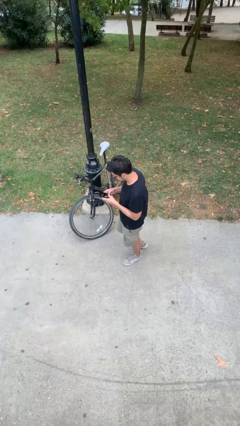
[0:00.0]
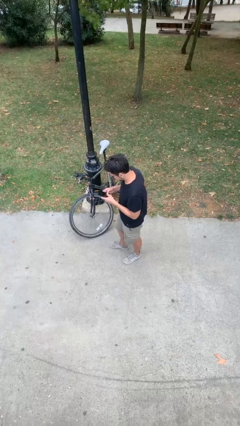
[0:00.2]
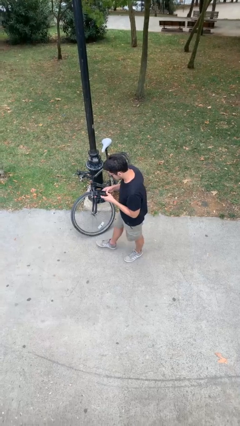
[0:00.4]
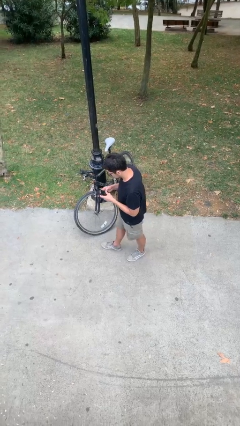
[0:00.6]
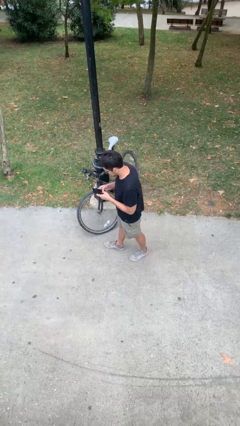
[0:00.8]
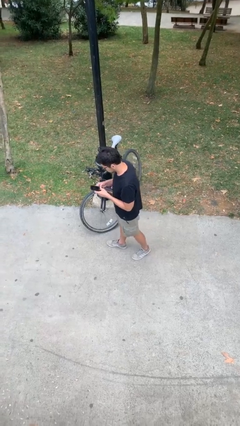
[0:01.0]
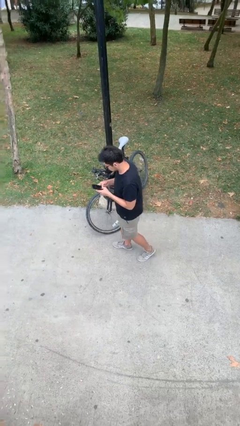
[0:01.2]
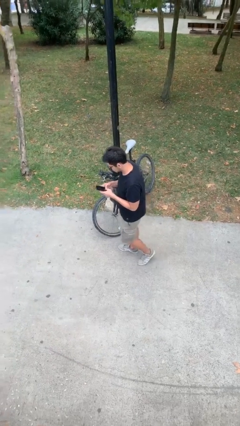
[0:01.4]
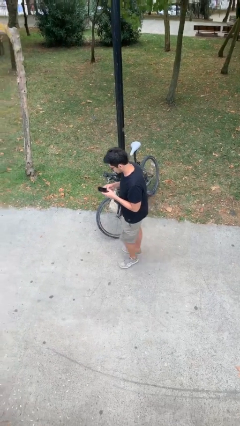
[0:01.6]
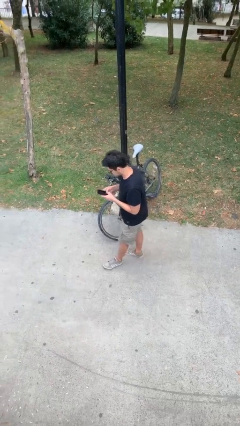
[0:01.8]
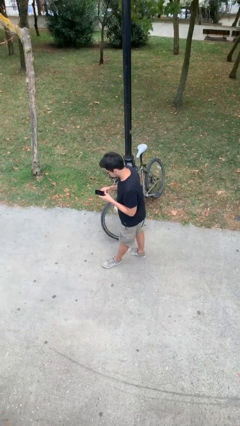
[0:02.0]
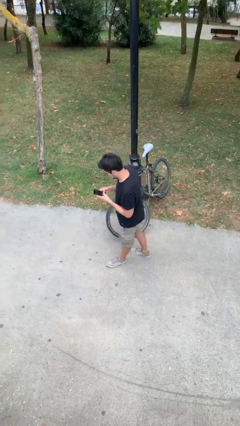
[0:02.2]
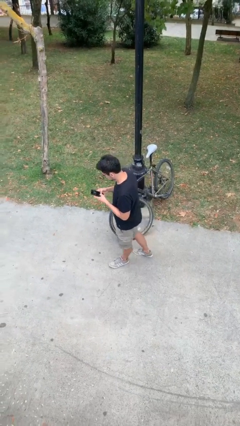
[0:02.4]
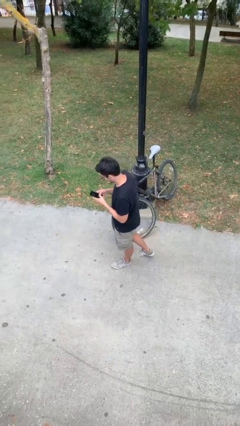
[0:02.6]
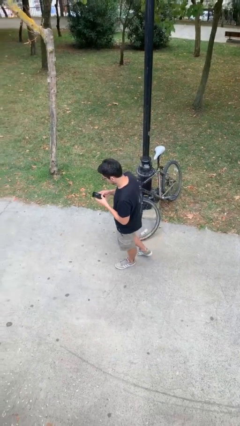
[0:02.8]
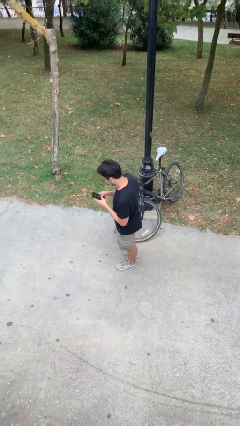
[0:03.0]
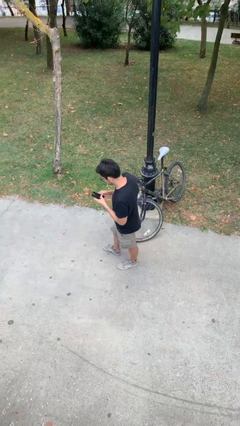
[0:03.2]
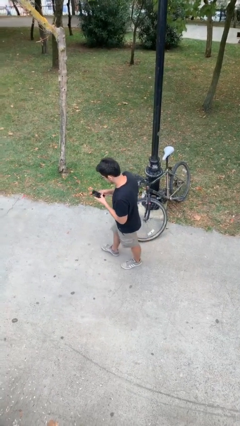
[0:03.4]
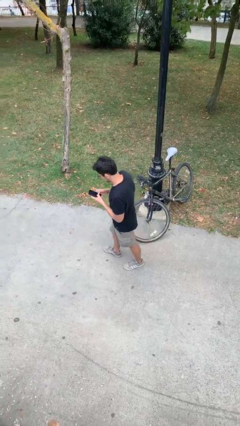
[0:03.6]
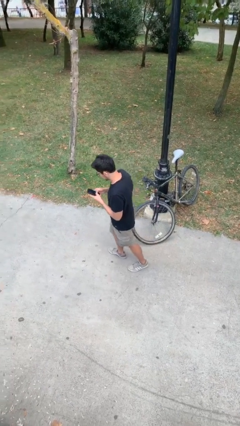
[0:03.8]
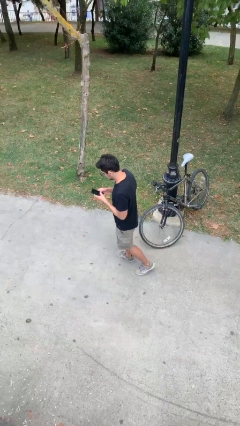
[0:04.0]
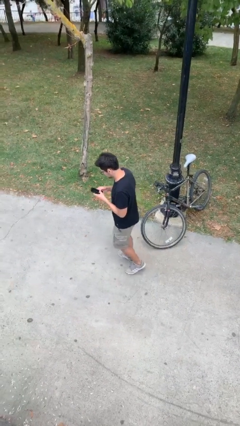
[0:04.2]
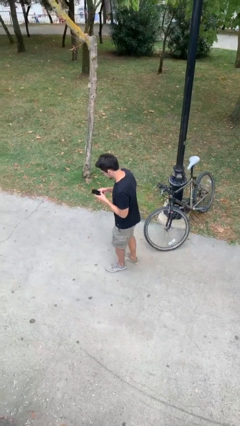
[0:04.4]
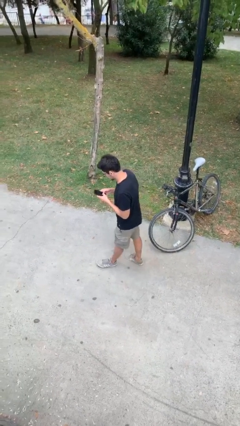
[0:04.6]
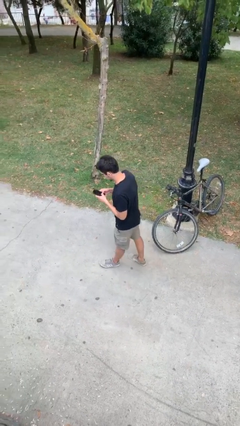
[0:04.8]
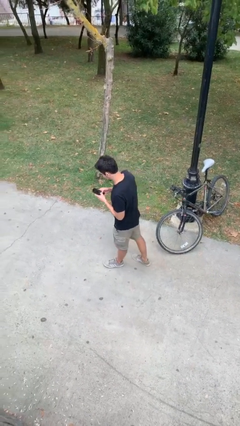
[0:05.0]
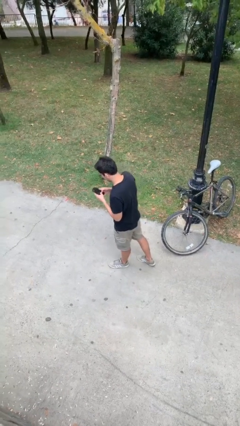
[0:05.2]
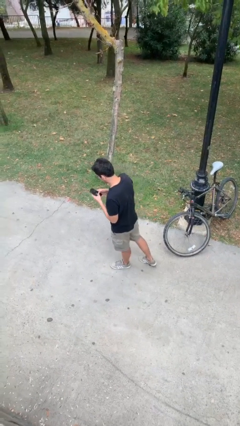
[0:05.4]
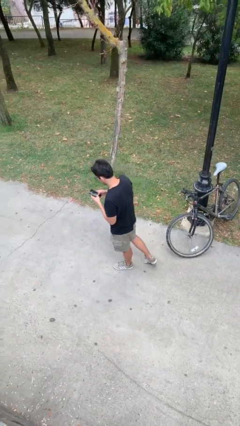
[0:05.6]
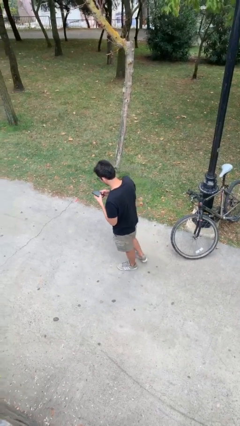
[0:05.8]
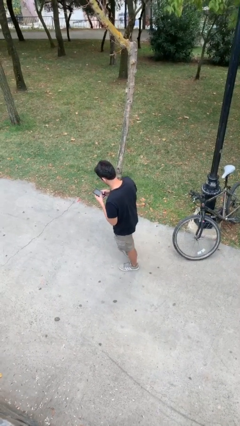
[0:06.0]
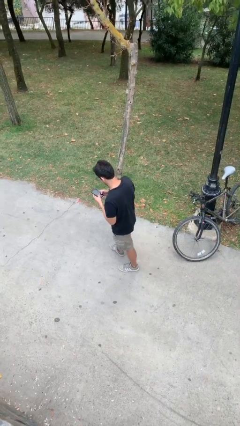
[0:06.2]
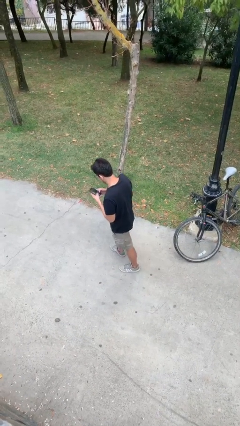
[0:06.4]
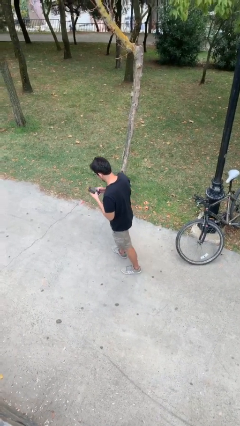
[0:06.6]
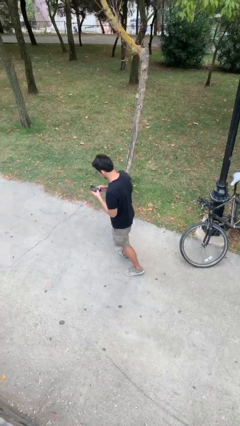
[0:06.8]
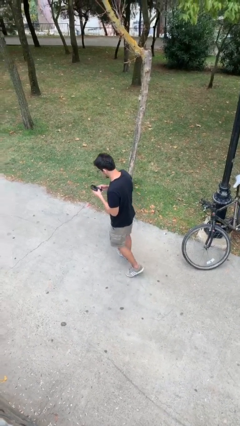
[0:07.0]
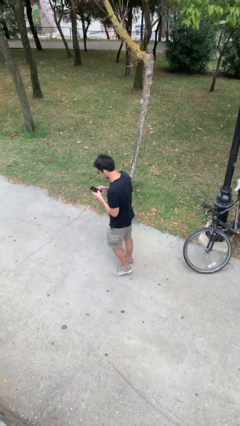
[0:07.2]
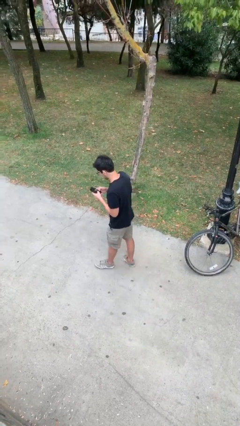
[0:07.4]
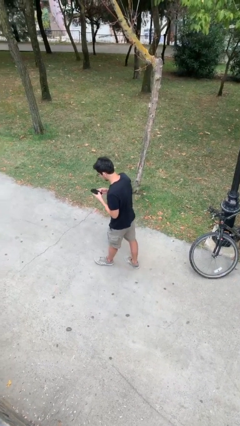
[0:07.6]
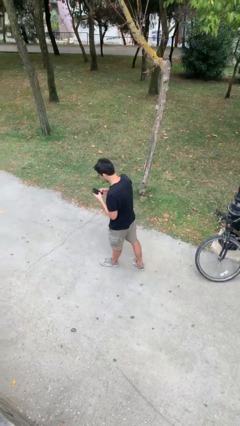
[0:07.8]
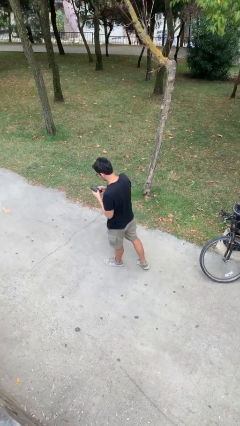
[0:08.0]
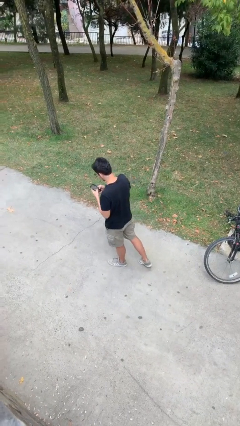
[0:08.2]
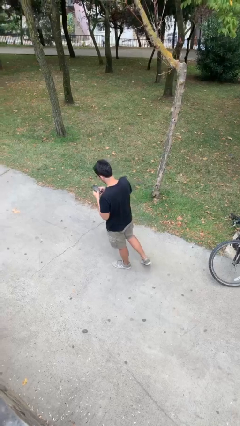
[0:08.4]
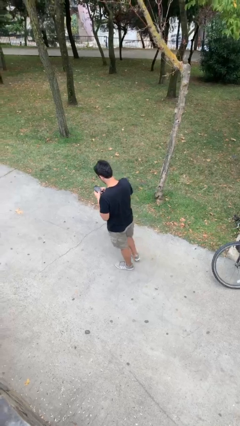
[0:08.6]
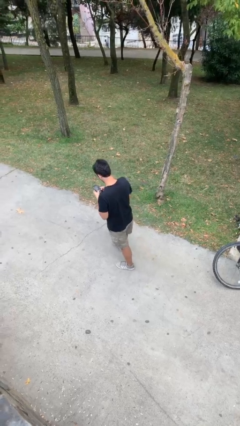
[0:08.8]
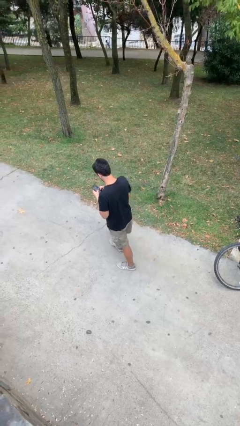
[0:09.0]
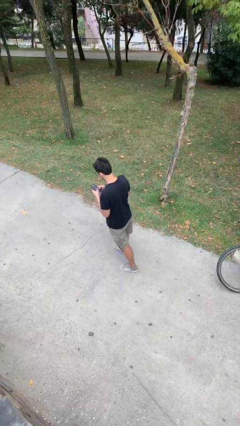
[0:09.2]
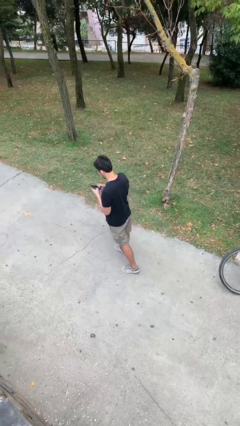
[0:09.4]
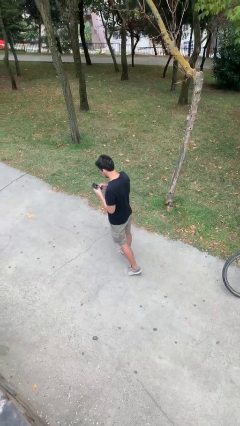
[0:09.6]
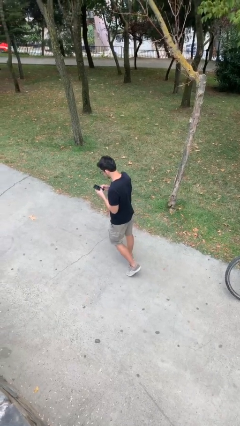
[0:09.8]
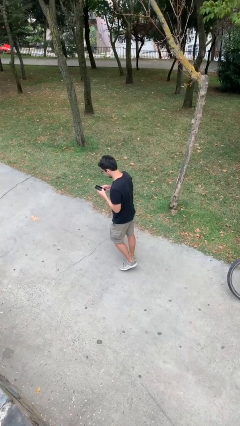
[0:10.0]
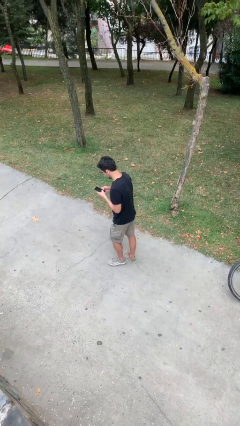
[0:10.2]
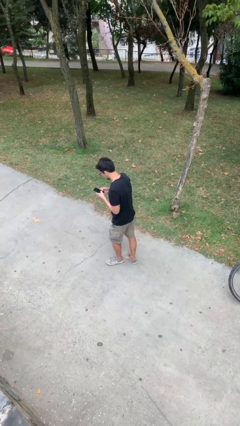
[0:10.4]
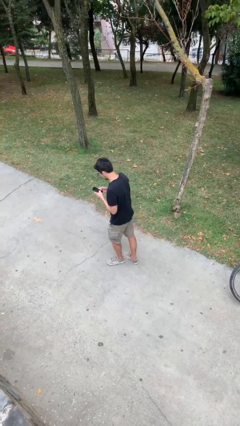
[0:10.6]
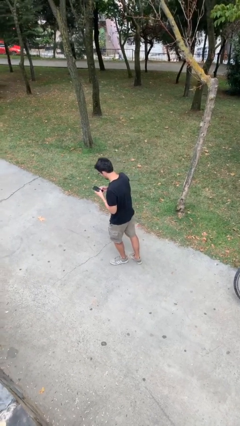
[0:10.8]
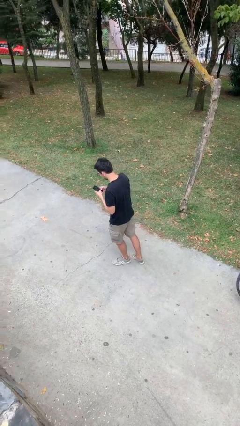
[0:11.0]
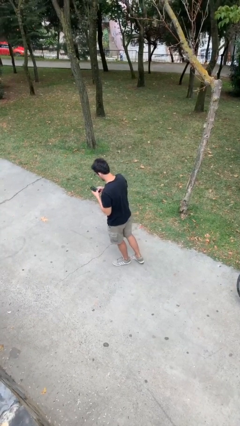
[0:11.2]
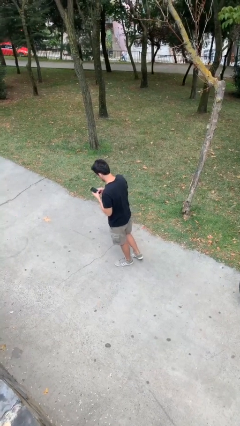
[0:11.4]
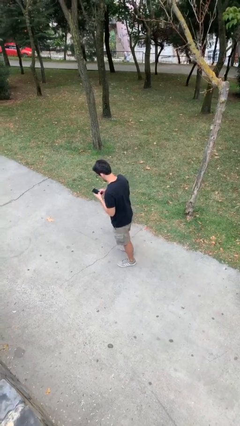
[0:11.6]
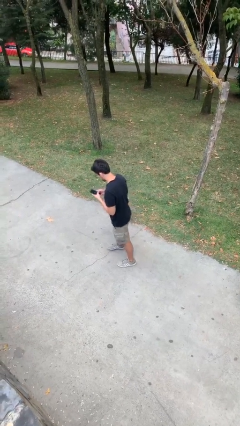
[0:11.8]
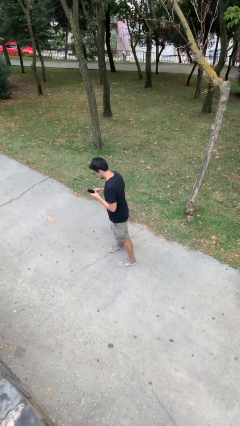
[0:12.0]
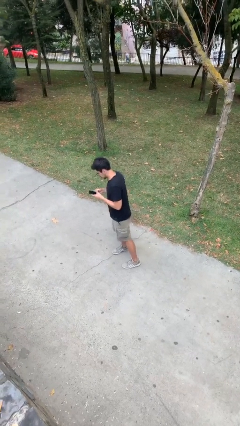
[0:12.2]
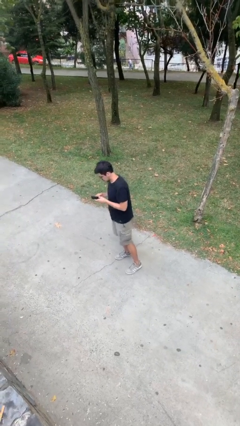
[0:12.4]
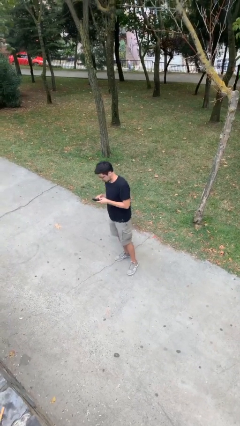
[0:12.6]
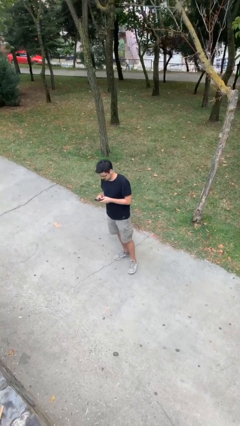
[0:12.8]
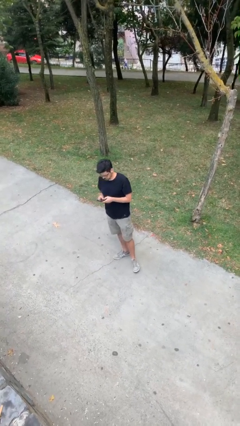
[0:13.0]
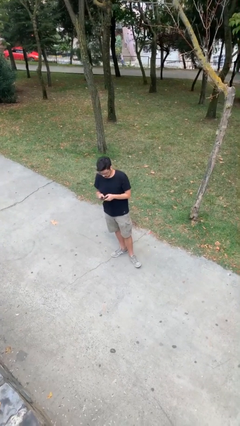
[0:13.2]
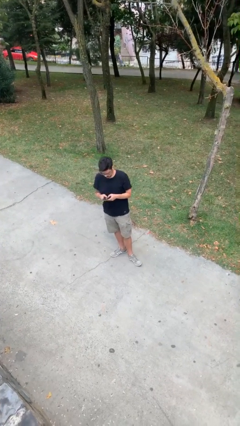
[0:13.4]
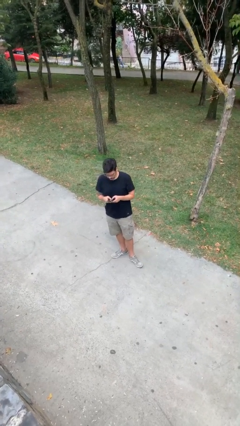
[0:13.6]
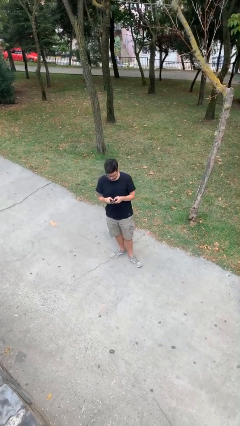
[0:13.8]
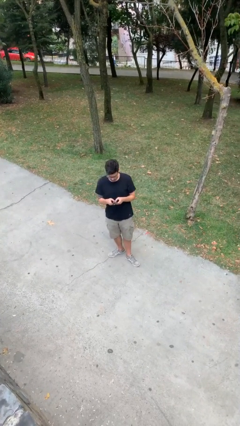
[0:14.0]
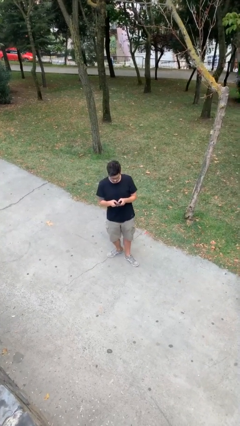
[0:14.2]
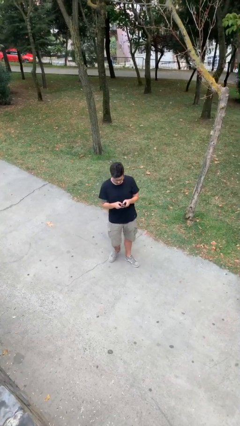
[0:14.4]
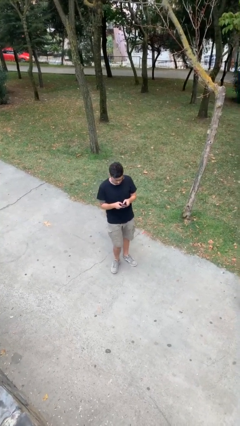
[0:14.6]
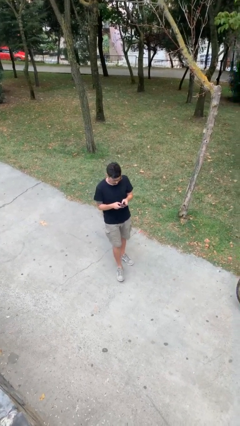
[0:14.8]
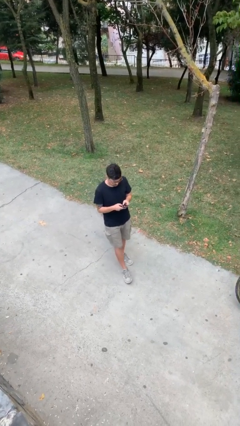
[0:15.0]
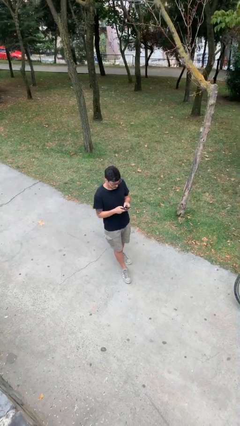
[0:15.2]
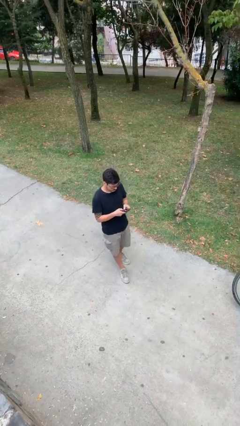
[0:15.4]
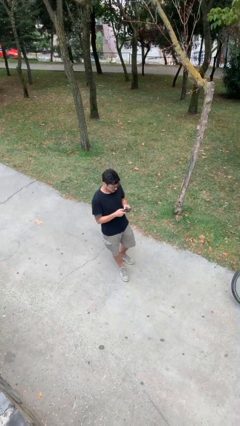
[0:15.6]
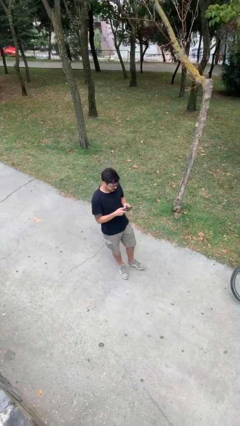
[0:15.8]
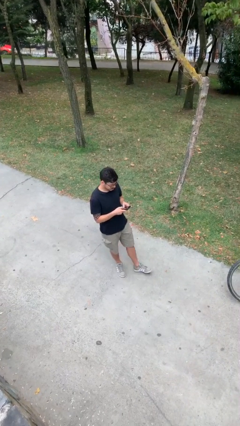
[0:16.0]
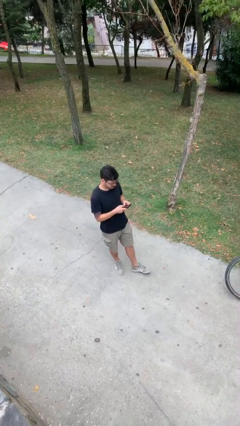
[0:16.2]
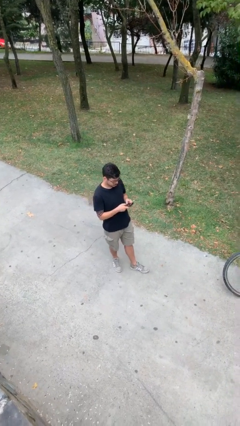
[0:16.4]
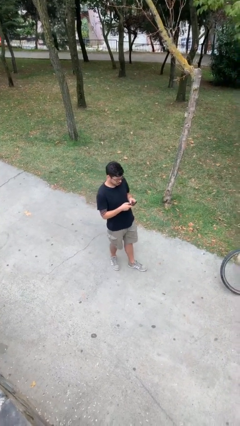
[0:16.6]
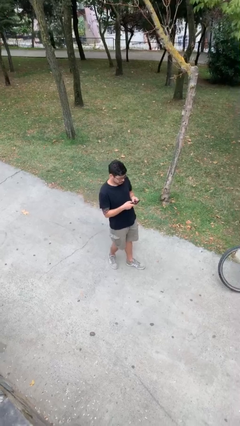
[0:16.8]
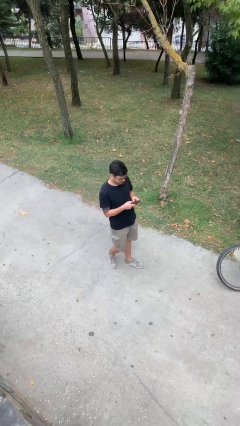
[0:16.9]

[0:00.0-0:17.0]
person texts on phone

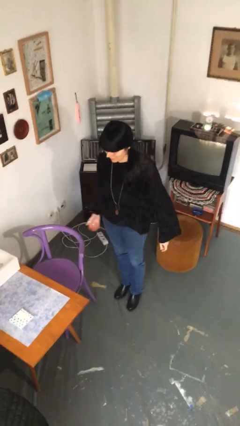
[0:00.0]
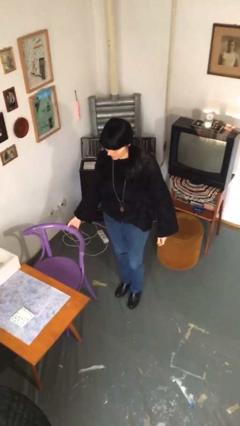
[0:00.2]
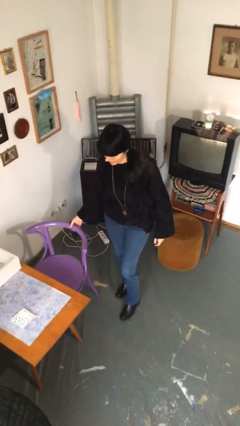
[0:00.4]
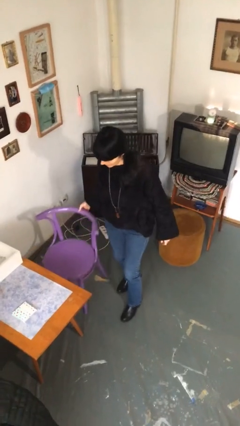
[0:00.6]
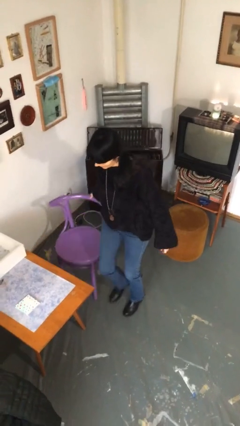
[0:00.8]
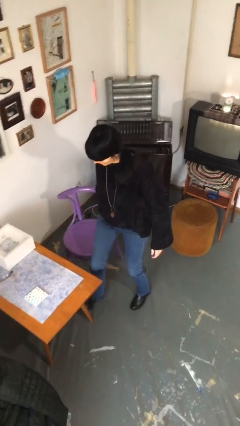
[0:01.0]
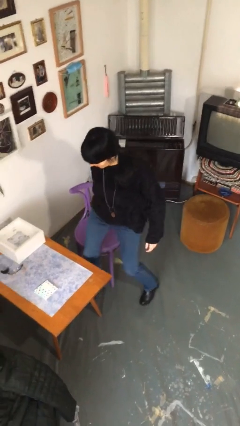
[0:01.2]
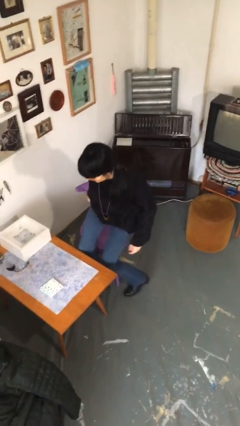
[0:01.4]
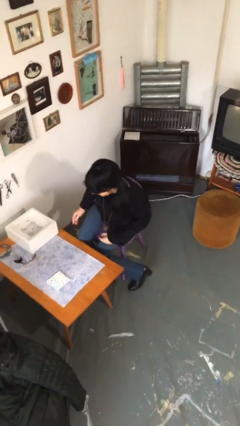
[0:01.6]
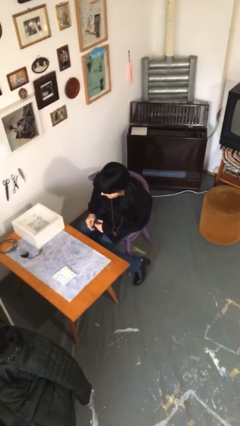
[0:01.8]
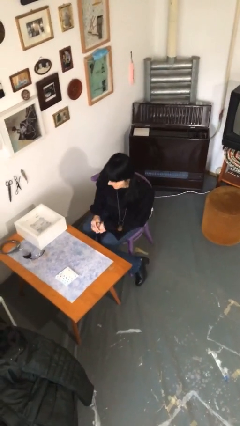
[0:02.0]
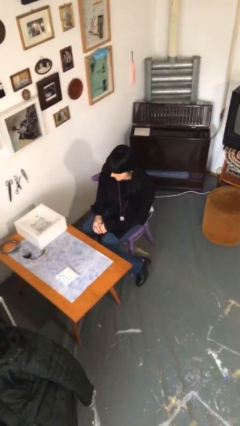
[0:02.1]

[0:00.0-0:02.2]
person sits down
